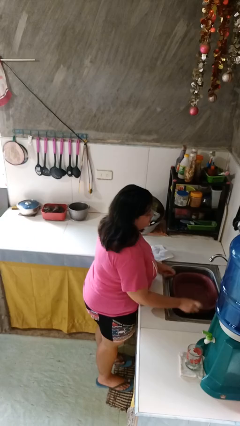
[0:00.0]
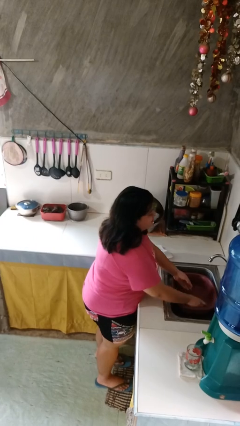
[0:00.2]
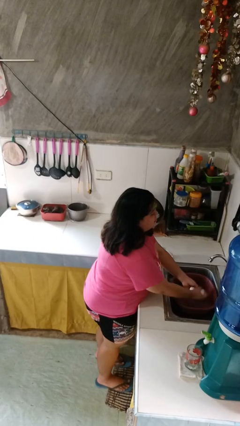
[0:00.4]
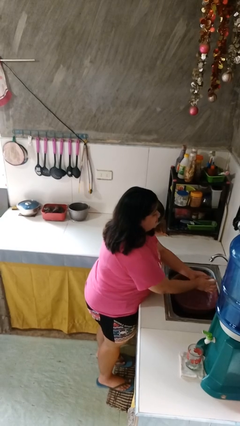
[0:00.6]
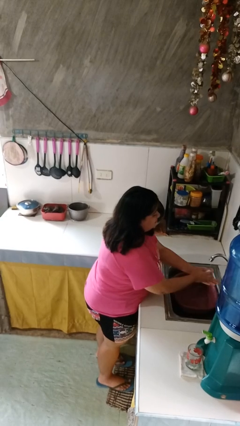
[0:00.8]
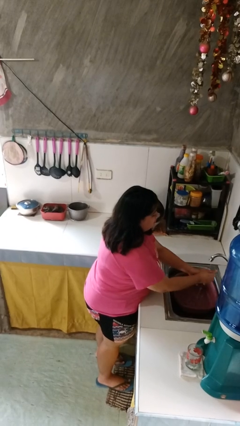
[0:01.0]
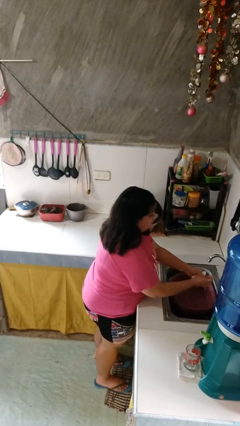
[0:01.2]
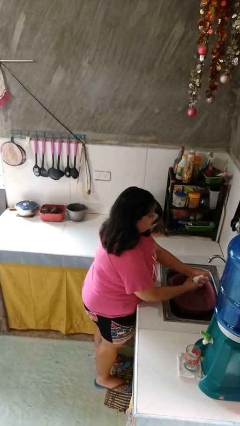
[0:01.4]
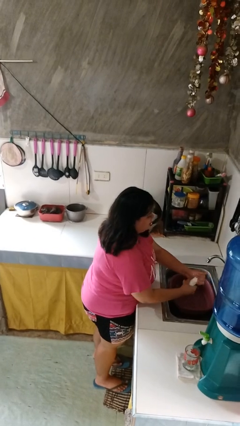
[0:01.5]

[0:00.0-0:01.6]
person washes hands

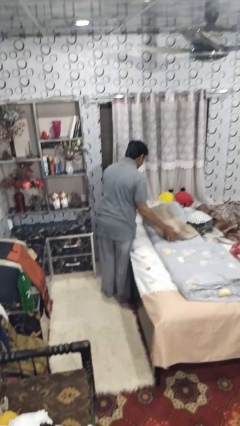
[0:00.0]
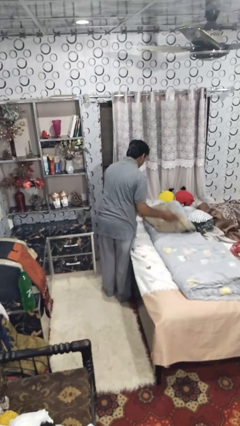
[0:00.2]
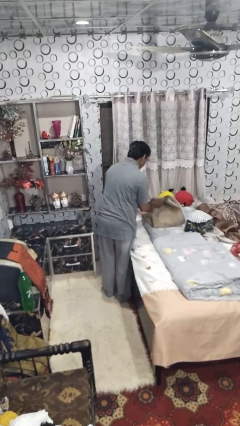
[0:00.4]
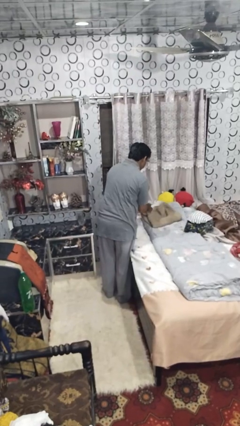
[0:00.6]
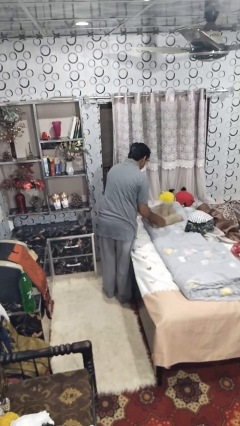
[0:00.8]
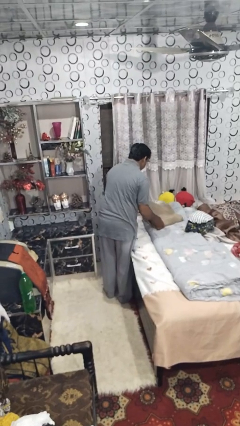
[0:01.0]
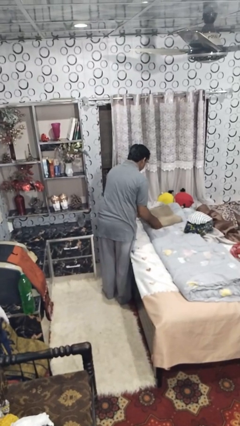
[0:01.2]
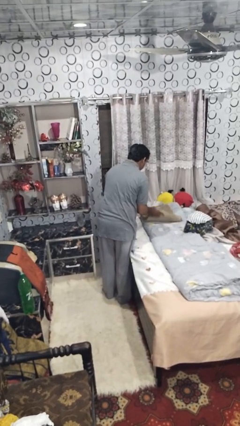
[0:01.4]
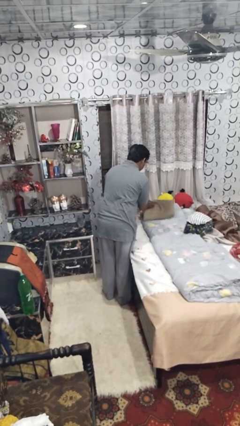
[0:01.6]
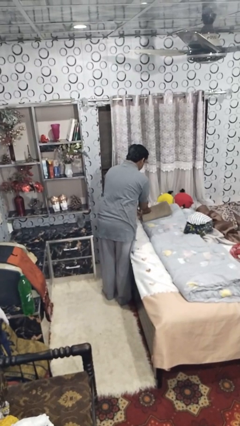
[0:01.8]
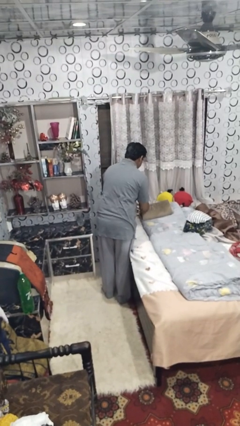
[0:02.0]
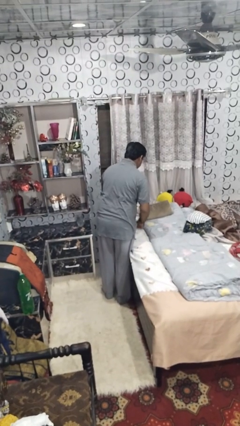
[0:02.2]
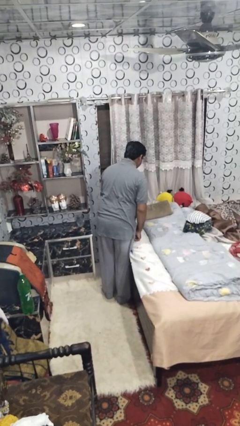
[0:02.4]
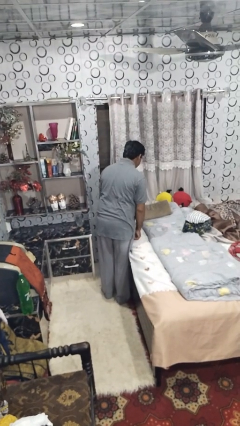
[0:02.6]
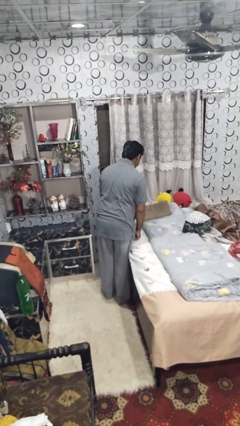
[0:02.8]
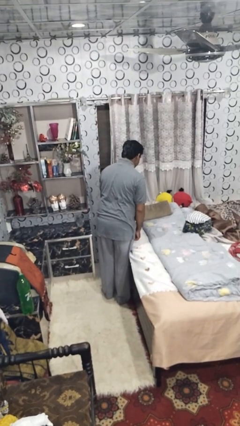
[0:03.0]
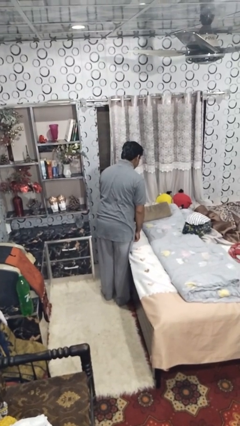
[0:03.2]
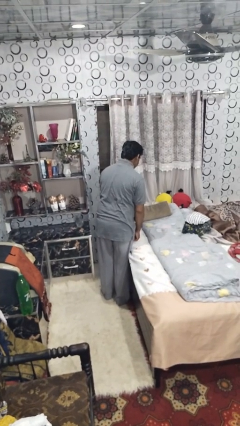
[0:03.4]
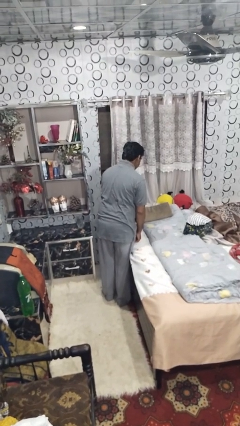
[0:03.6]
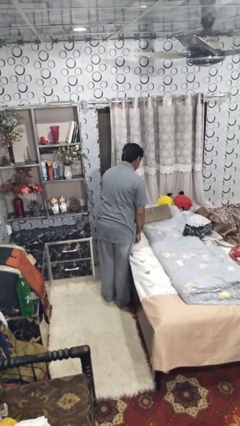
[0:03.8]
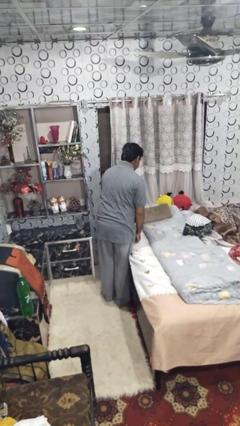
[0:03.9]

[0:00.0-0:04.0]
person folds towel

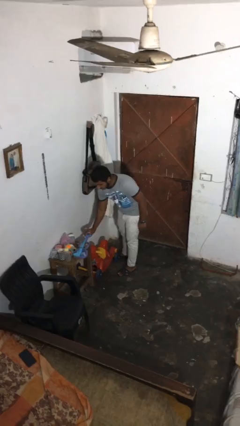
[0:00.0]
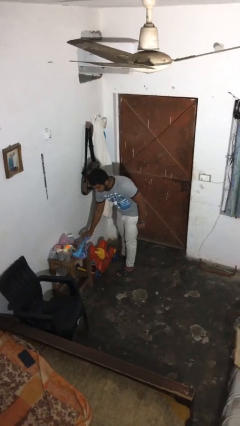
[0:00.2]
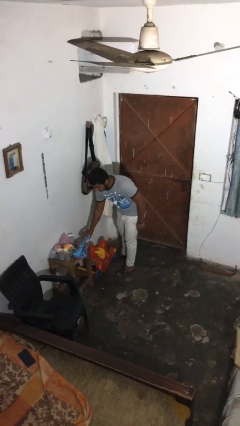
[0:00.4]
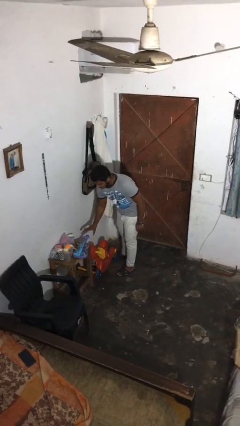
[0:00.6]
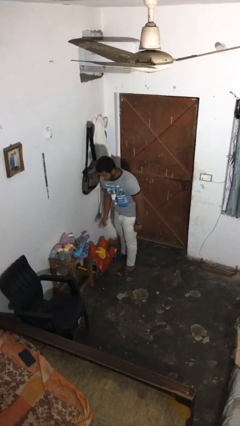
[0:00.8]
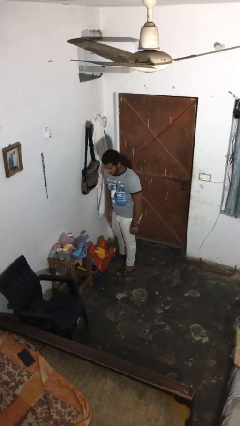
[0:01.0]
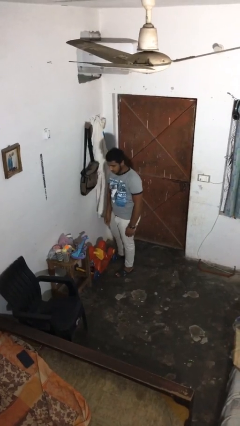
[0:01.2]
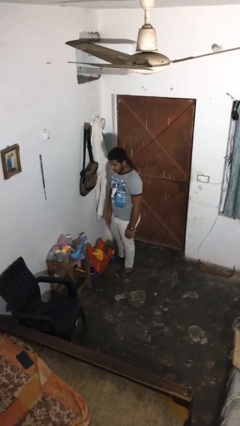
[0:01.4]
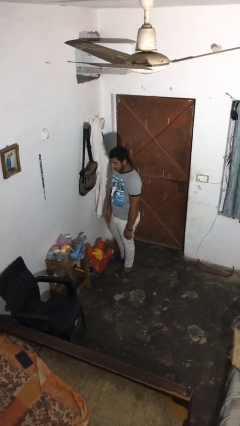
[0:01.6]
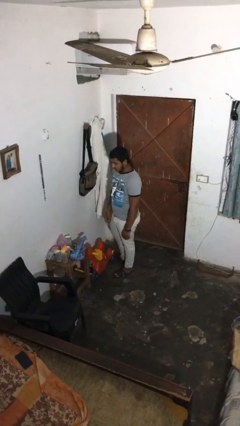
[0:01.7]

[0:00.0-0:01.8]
person puts down object on table

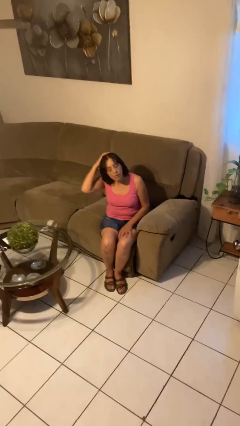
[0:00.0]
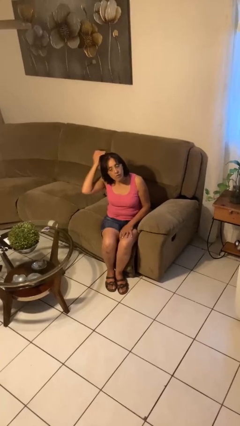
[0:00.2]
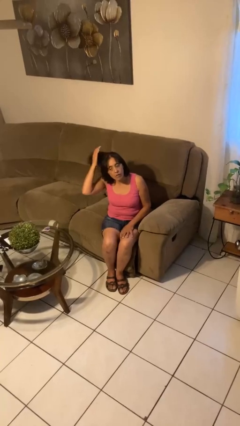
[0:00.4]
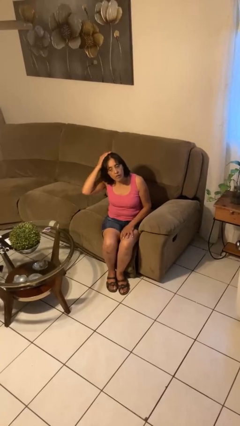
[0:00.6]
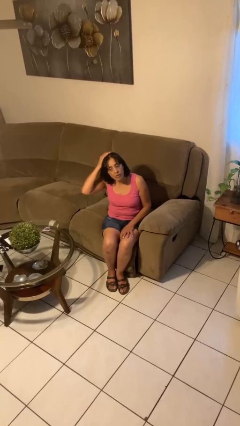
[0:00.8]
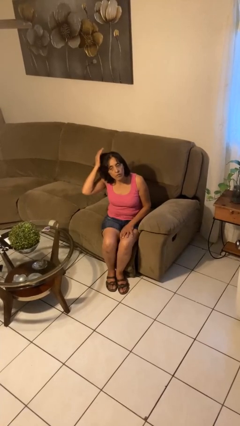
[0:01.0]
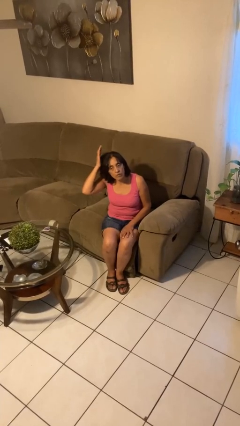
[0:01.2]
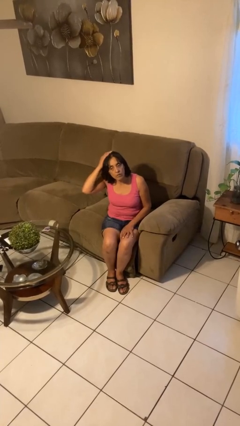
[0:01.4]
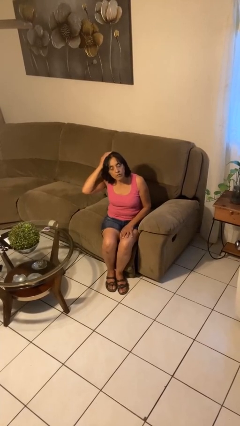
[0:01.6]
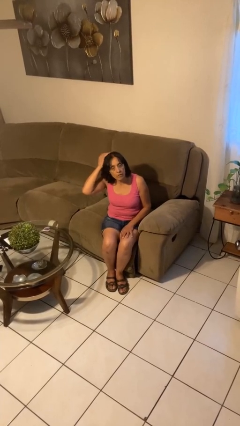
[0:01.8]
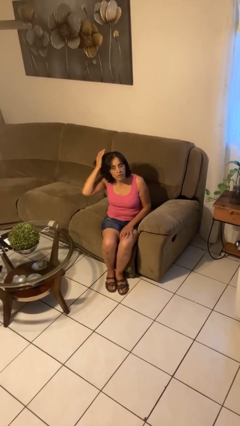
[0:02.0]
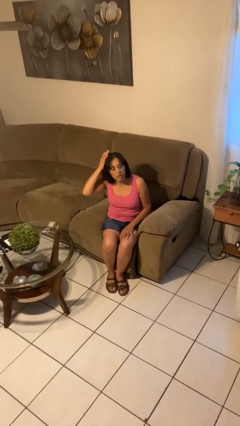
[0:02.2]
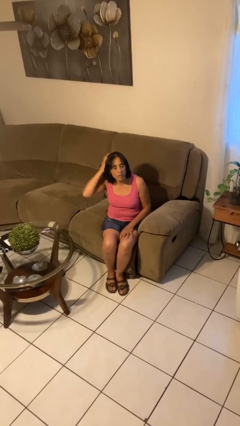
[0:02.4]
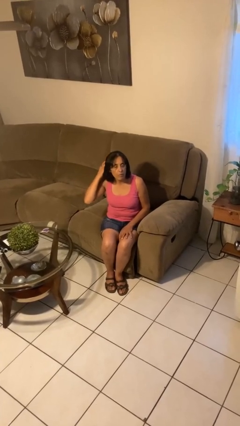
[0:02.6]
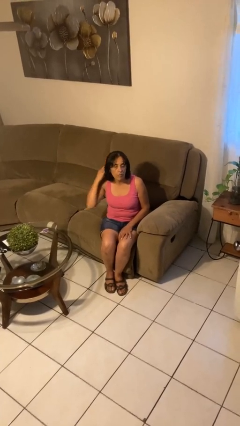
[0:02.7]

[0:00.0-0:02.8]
person pats head

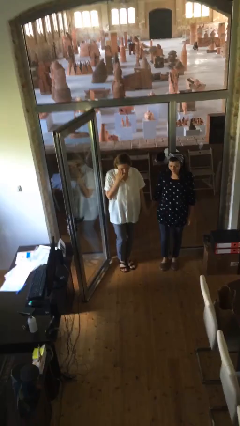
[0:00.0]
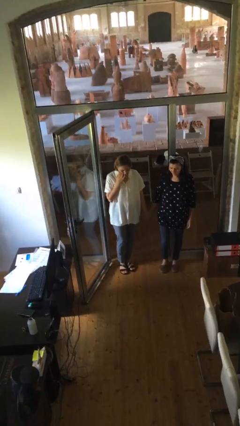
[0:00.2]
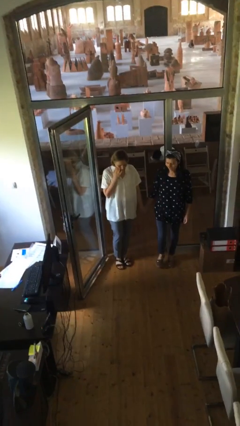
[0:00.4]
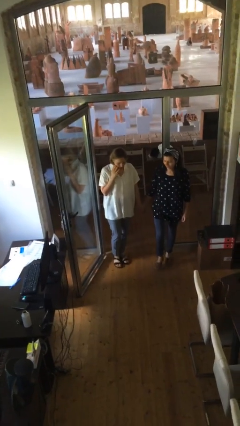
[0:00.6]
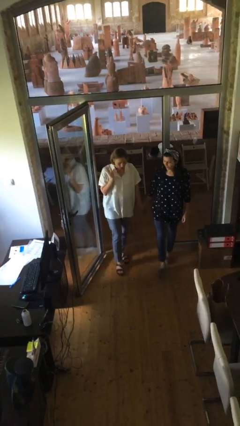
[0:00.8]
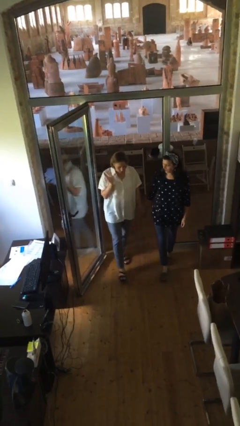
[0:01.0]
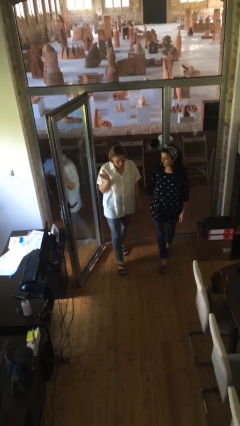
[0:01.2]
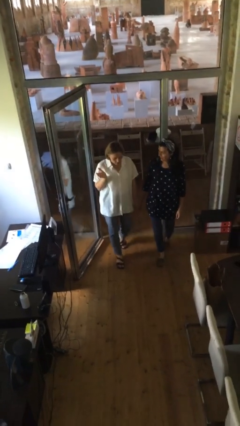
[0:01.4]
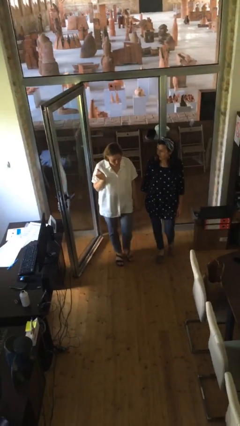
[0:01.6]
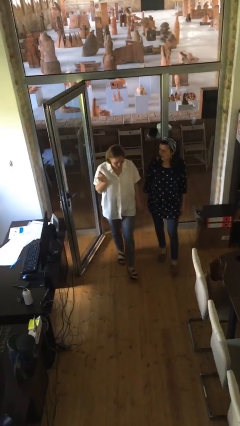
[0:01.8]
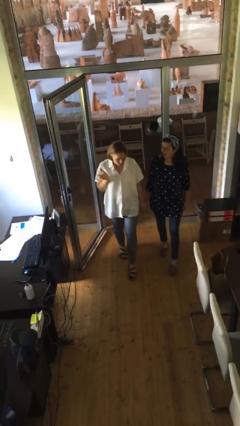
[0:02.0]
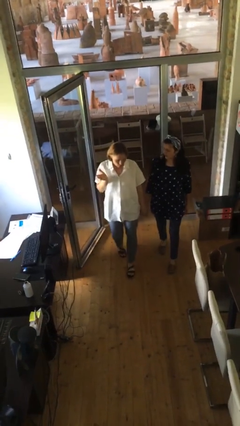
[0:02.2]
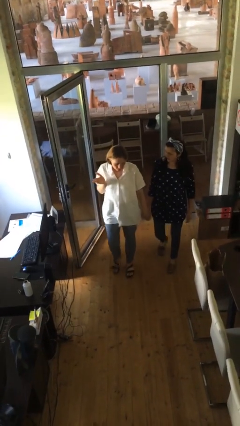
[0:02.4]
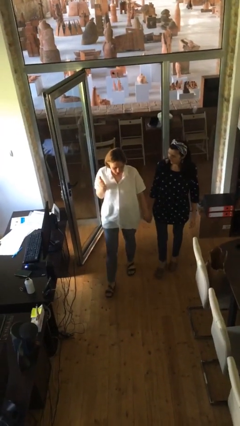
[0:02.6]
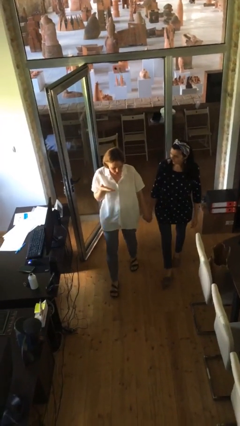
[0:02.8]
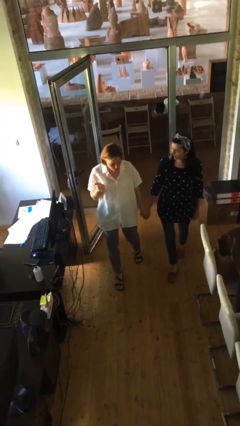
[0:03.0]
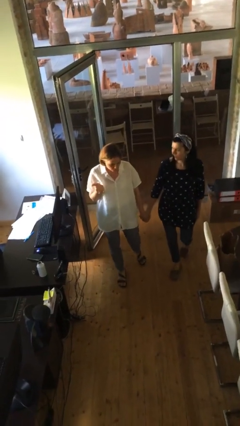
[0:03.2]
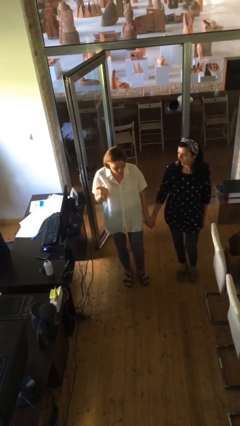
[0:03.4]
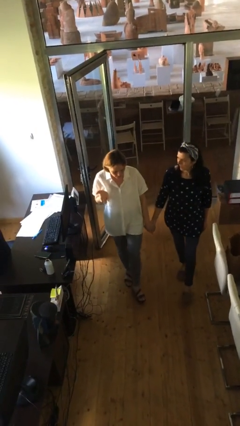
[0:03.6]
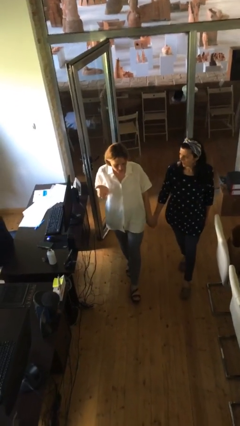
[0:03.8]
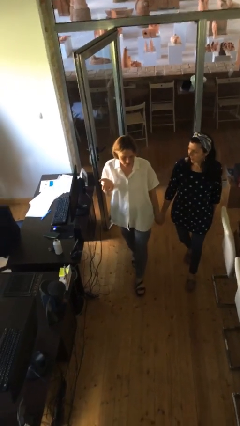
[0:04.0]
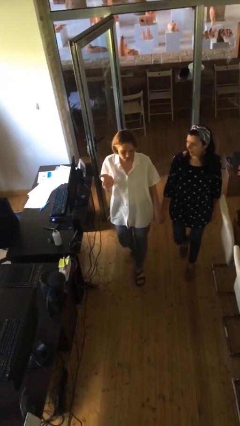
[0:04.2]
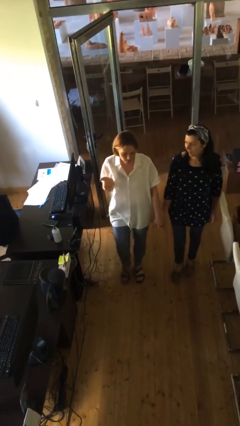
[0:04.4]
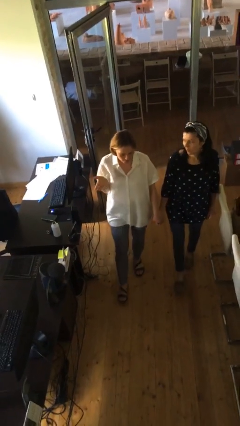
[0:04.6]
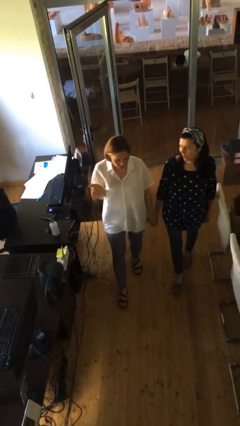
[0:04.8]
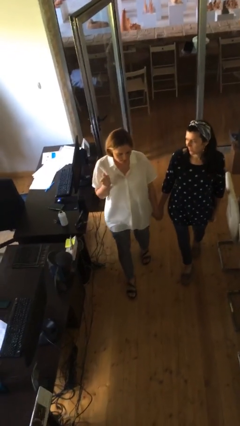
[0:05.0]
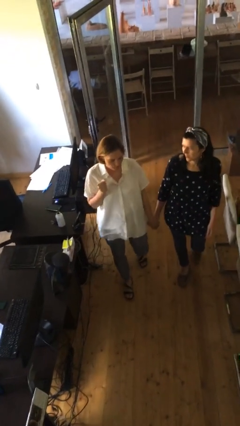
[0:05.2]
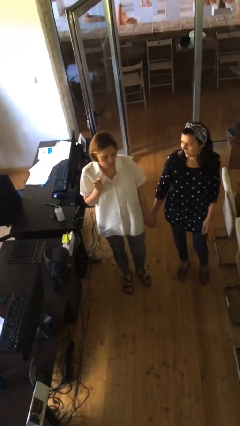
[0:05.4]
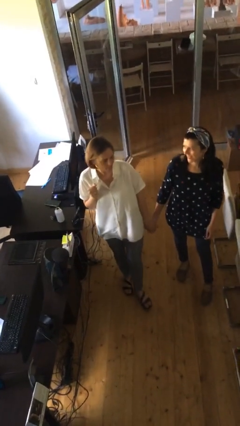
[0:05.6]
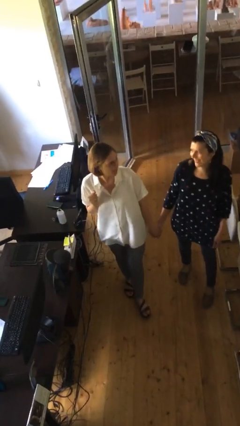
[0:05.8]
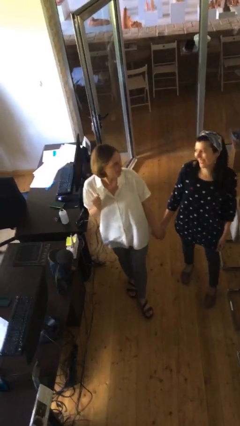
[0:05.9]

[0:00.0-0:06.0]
person holds hand

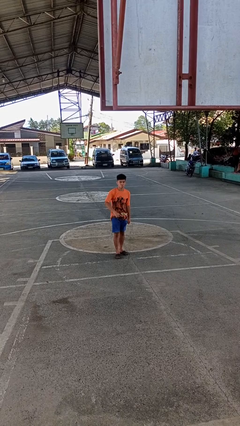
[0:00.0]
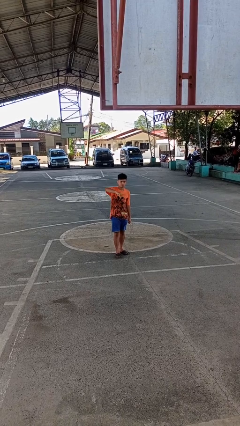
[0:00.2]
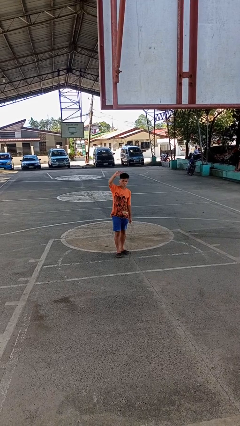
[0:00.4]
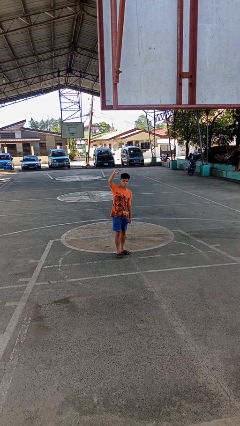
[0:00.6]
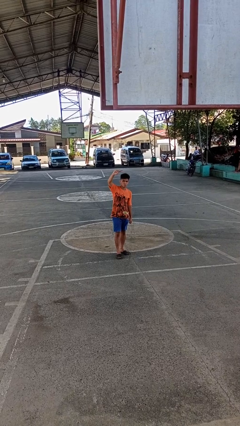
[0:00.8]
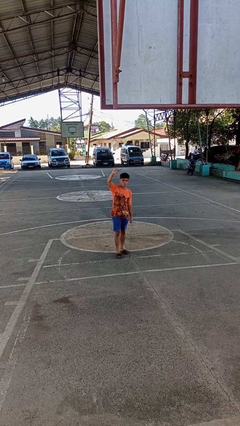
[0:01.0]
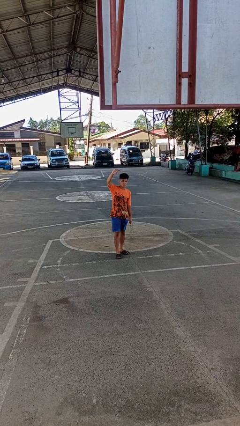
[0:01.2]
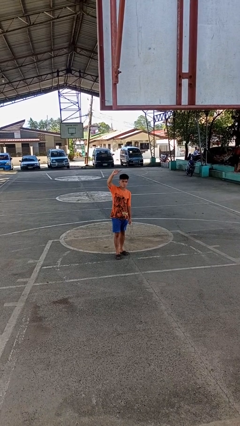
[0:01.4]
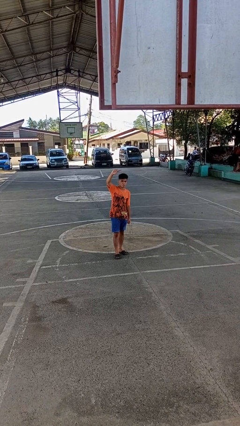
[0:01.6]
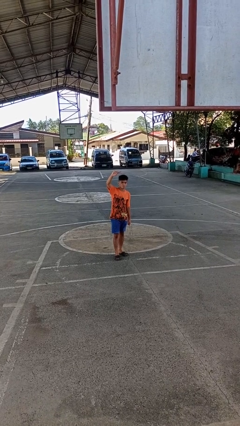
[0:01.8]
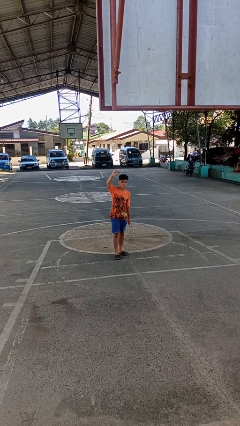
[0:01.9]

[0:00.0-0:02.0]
person gestures swipe up
